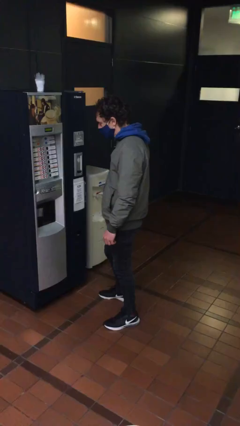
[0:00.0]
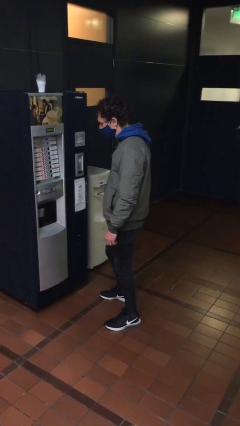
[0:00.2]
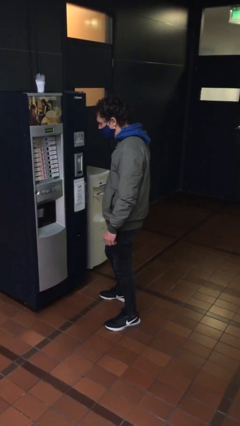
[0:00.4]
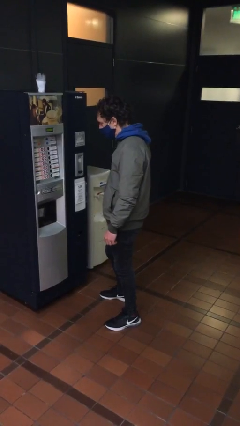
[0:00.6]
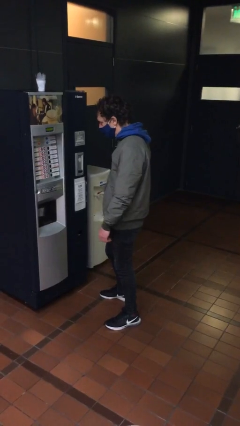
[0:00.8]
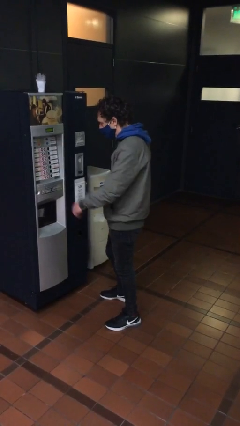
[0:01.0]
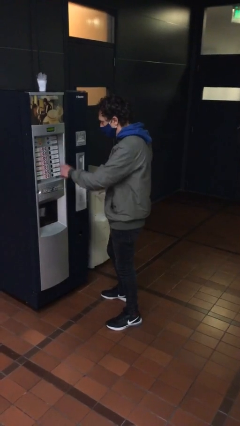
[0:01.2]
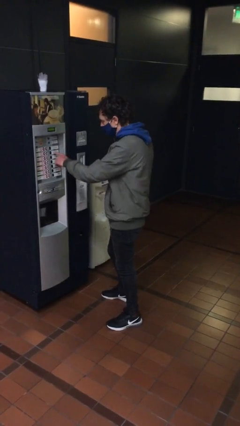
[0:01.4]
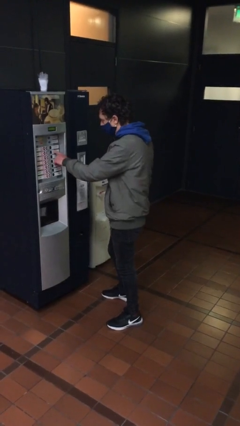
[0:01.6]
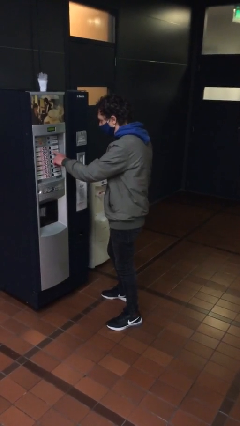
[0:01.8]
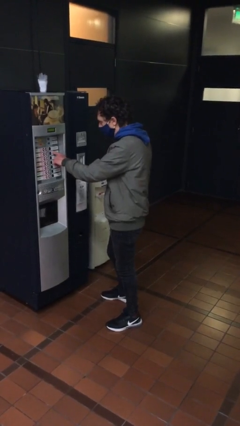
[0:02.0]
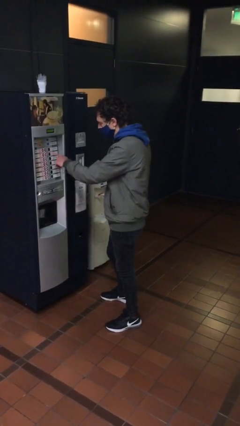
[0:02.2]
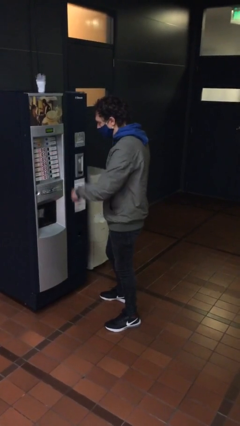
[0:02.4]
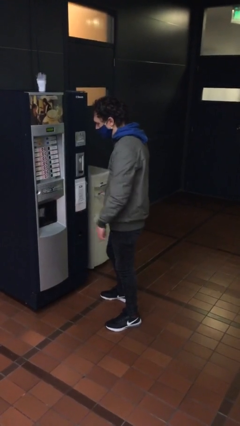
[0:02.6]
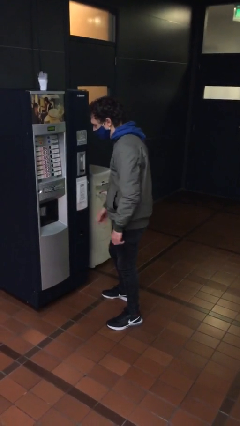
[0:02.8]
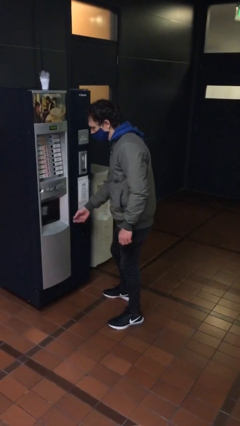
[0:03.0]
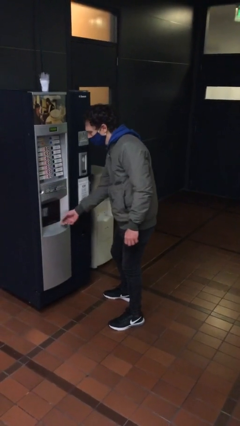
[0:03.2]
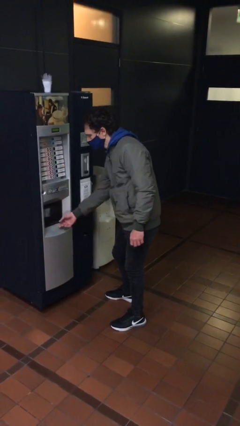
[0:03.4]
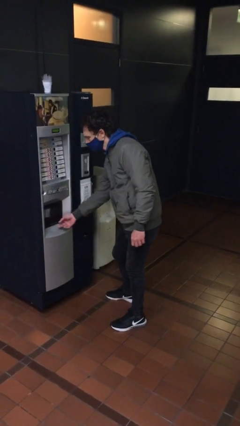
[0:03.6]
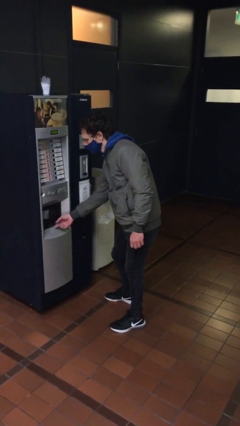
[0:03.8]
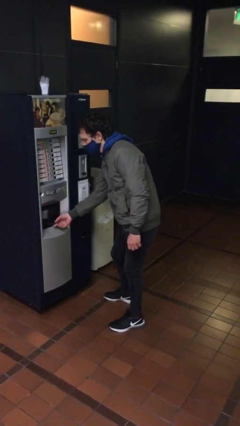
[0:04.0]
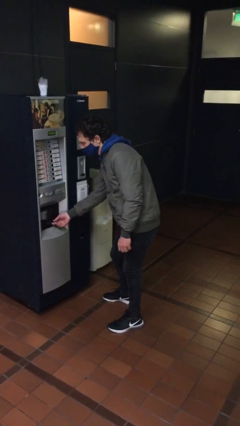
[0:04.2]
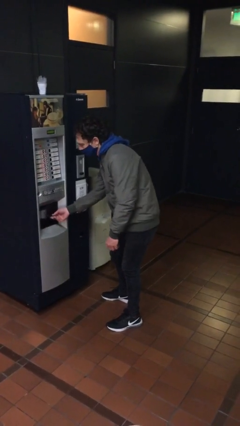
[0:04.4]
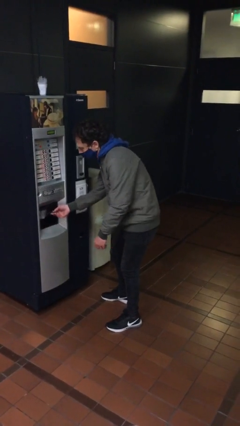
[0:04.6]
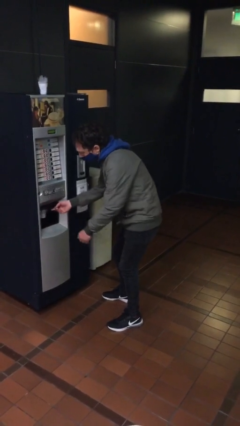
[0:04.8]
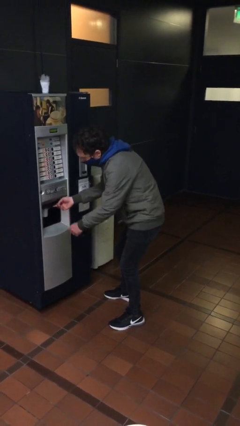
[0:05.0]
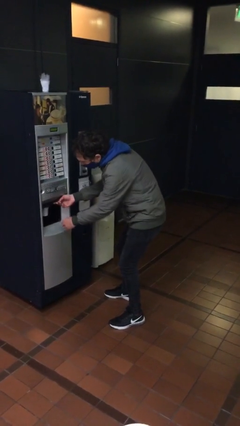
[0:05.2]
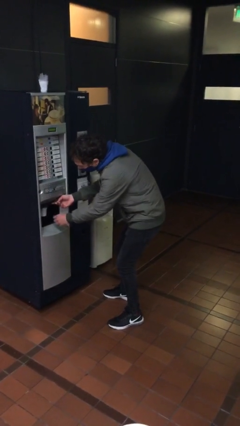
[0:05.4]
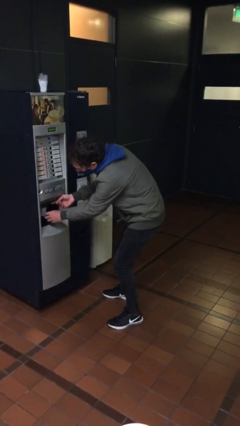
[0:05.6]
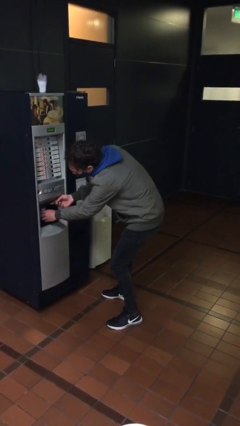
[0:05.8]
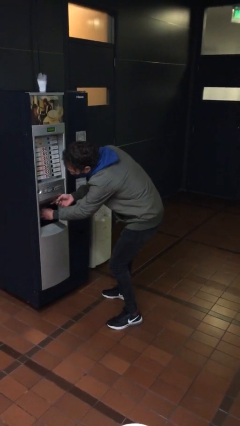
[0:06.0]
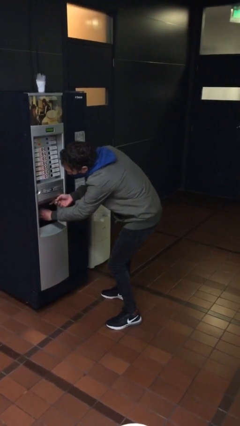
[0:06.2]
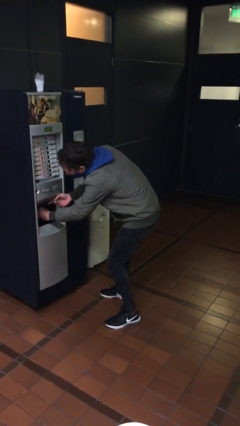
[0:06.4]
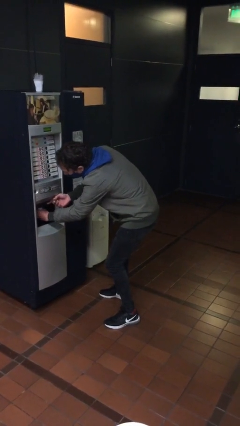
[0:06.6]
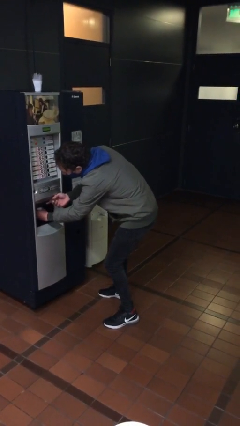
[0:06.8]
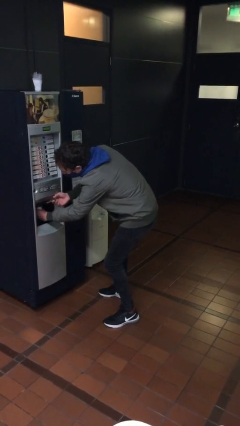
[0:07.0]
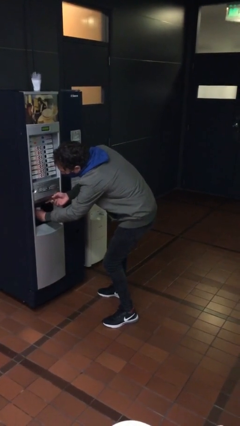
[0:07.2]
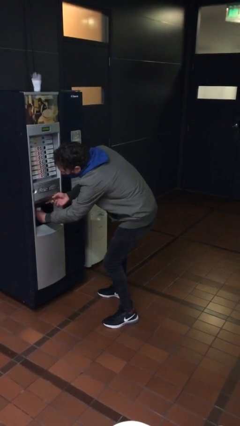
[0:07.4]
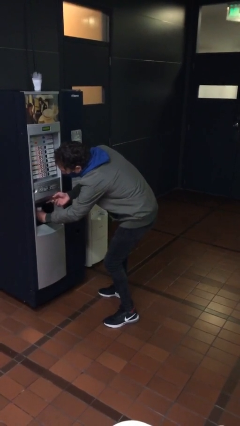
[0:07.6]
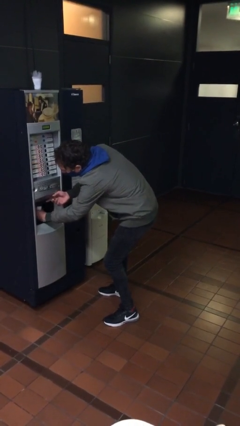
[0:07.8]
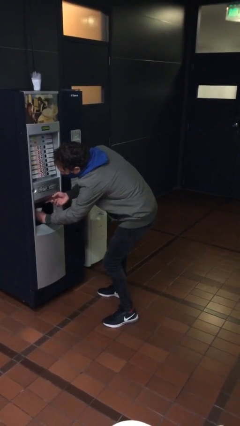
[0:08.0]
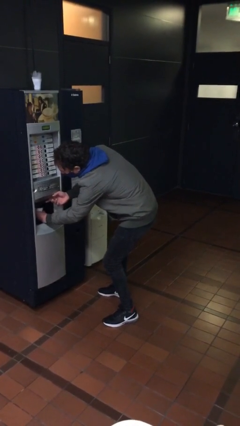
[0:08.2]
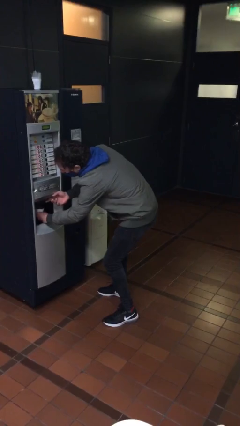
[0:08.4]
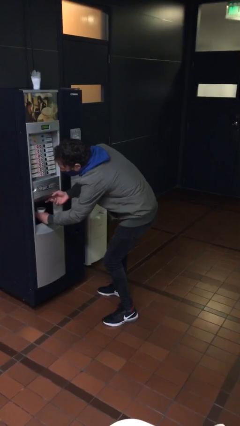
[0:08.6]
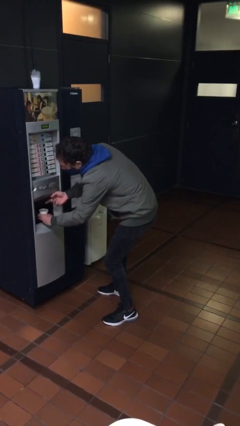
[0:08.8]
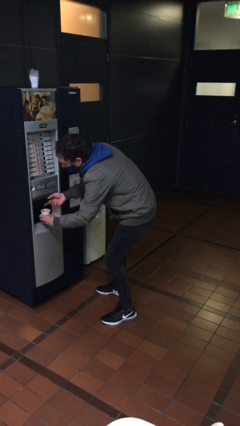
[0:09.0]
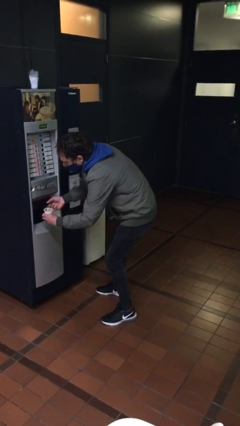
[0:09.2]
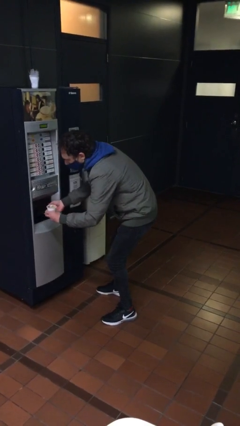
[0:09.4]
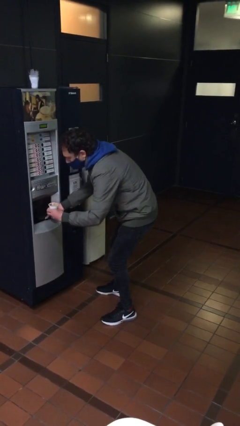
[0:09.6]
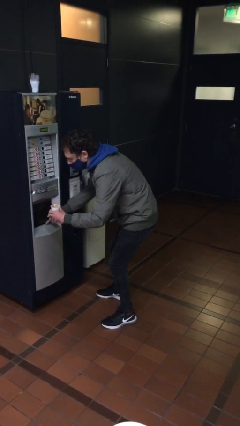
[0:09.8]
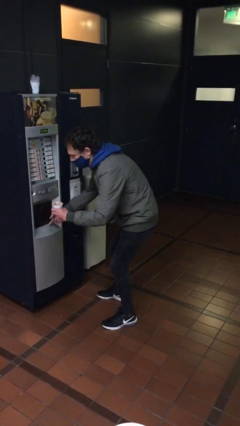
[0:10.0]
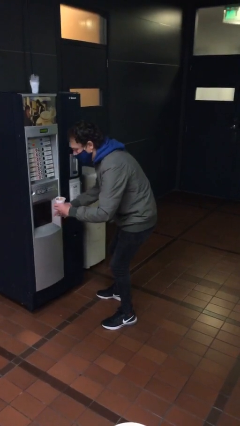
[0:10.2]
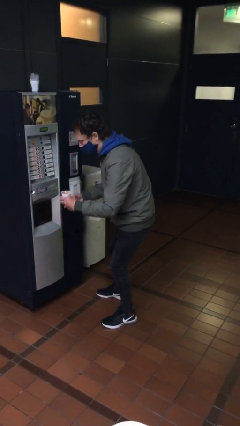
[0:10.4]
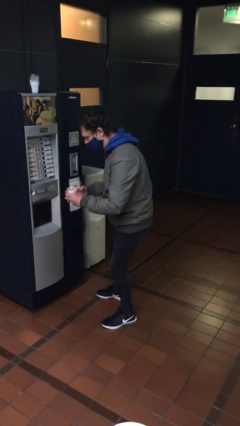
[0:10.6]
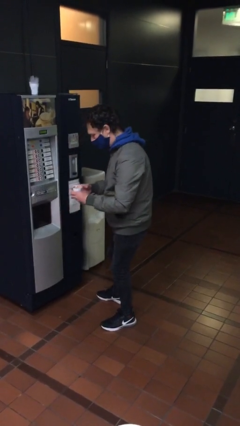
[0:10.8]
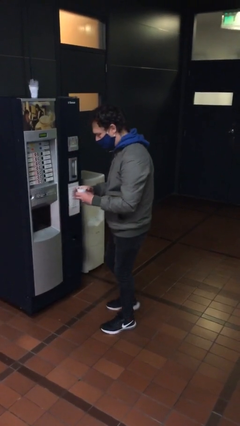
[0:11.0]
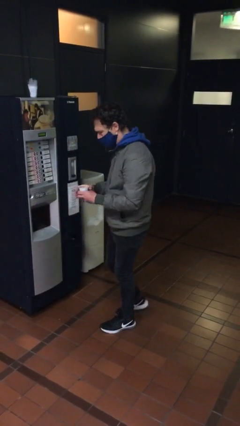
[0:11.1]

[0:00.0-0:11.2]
person purchases from machine

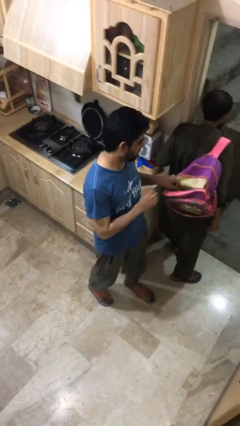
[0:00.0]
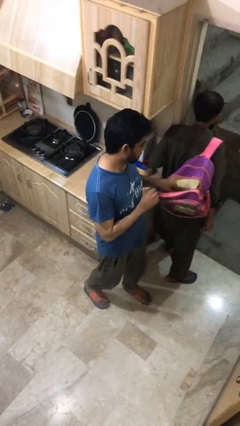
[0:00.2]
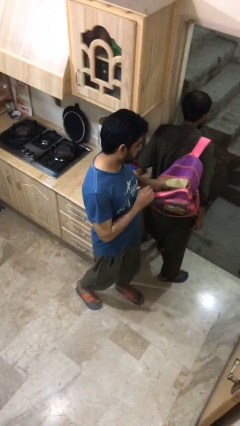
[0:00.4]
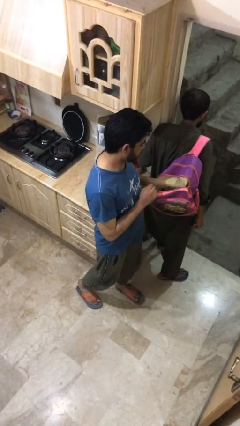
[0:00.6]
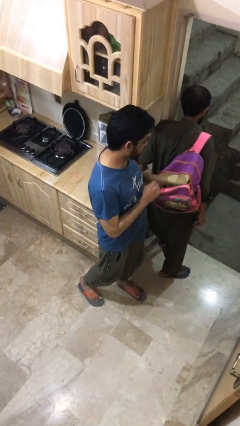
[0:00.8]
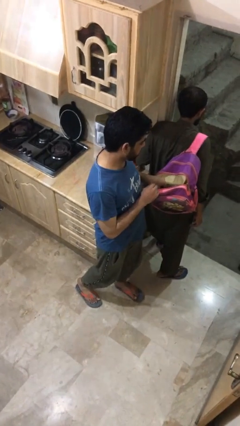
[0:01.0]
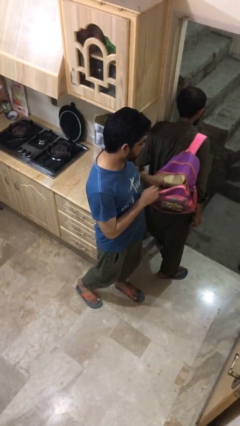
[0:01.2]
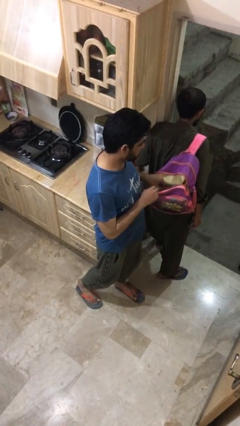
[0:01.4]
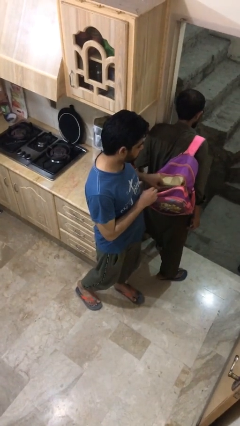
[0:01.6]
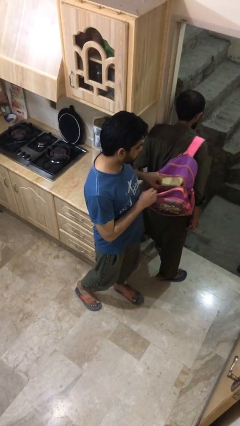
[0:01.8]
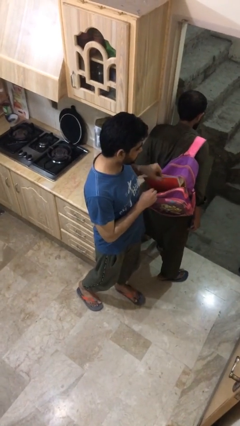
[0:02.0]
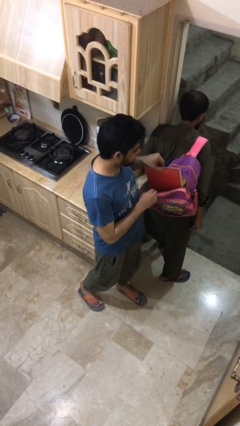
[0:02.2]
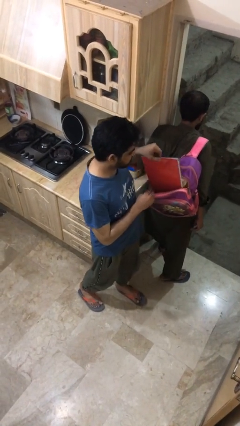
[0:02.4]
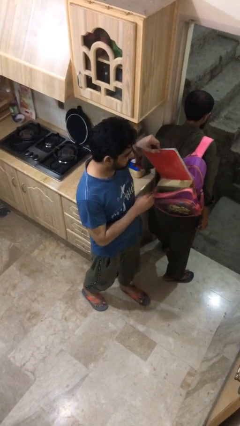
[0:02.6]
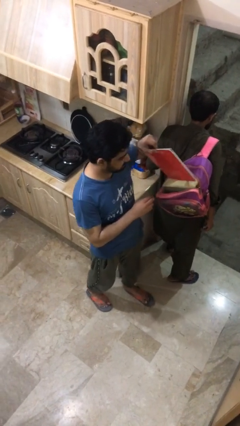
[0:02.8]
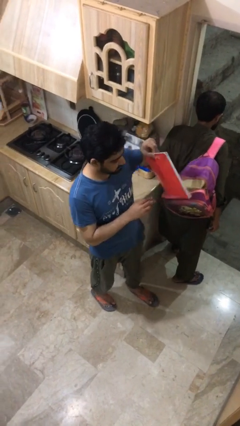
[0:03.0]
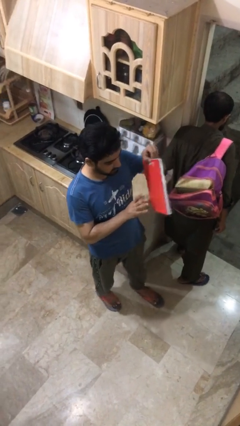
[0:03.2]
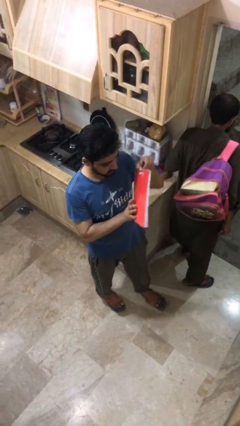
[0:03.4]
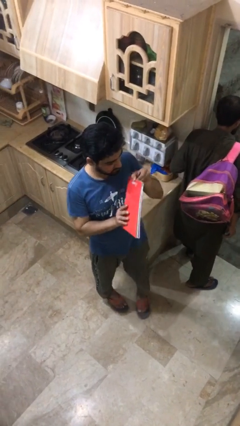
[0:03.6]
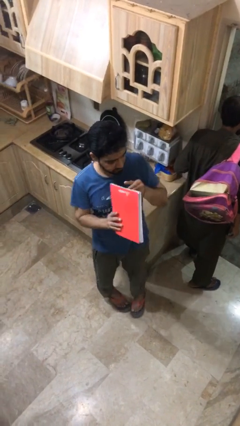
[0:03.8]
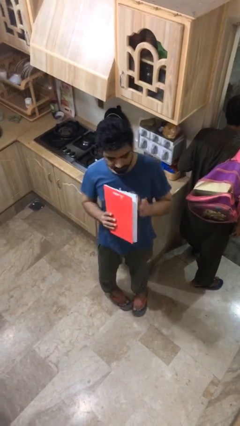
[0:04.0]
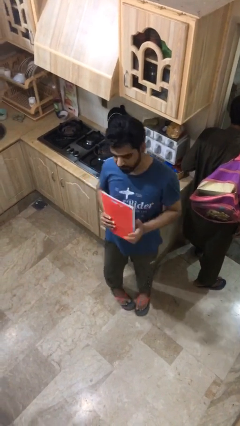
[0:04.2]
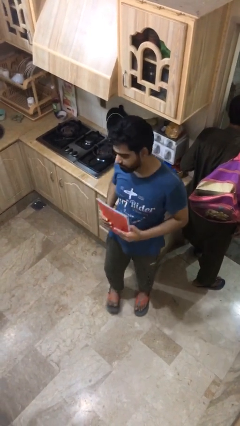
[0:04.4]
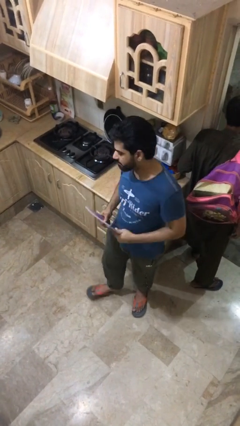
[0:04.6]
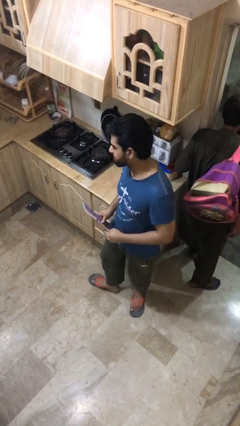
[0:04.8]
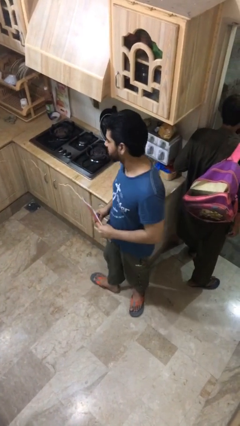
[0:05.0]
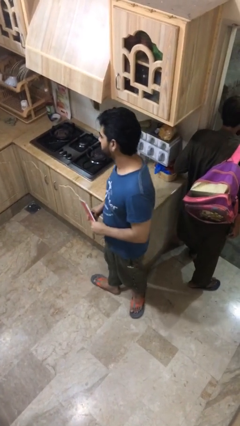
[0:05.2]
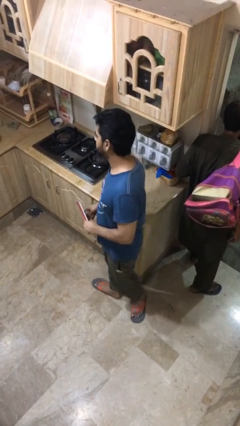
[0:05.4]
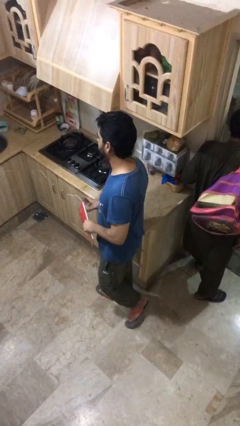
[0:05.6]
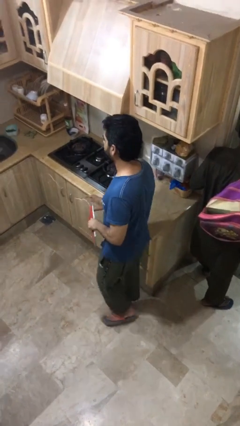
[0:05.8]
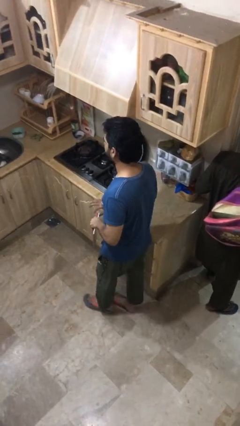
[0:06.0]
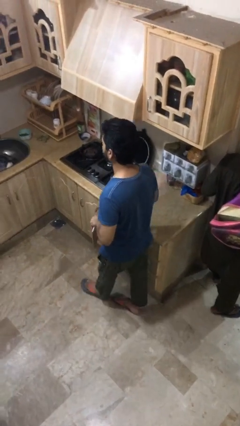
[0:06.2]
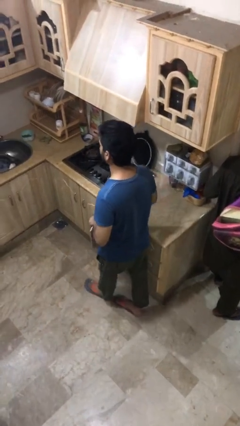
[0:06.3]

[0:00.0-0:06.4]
person steals object from person
